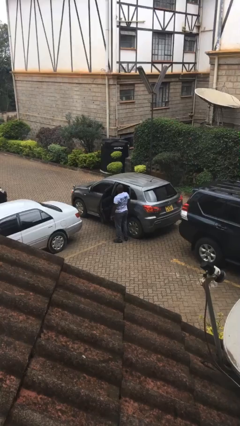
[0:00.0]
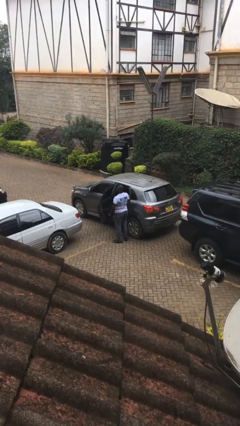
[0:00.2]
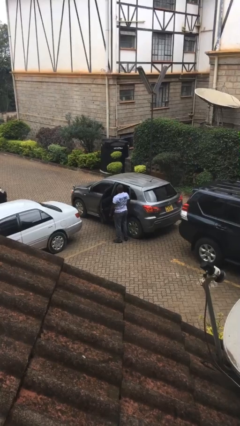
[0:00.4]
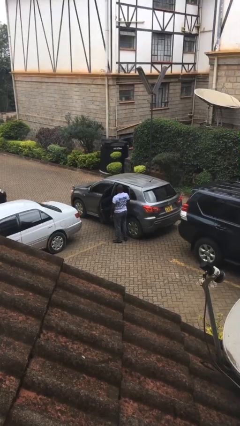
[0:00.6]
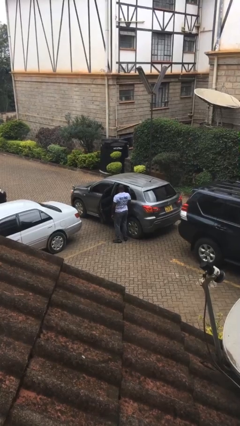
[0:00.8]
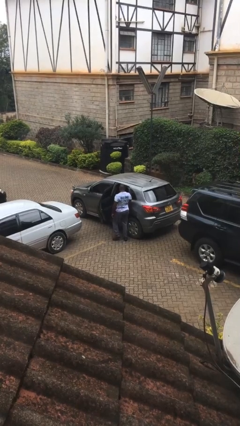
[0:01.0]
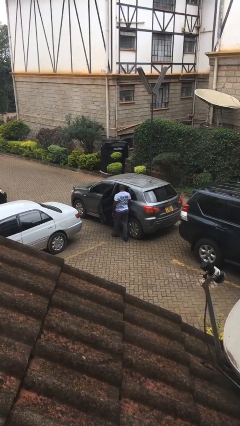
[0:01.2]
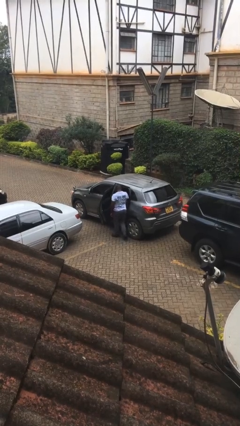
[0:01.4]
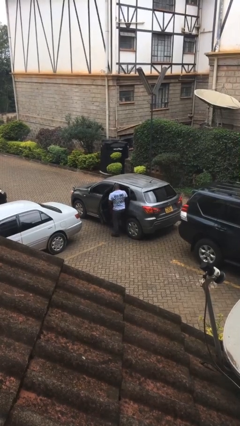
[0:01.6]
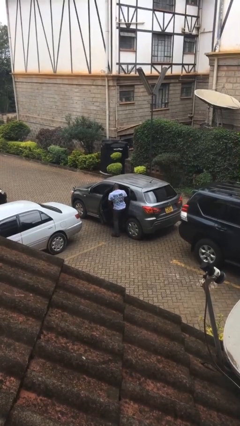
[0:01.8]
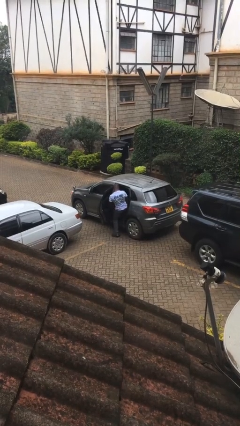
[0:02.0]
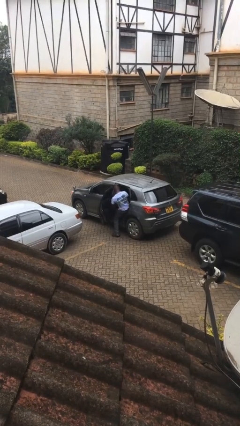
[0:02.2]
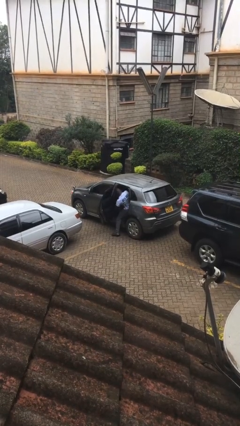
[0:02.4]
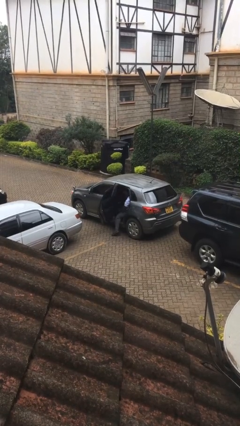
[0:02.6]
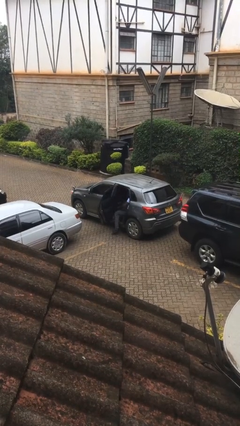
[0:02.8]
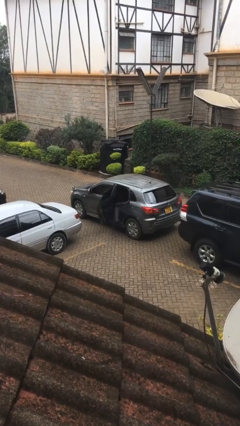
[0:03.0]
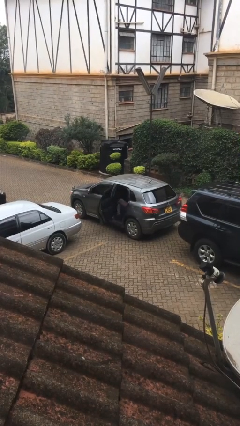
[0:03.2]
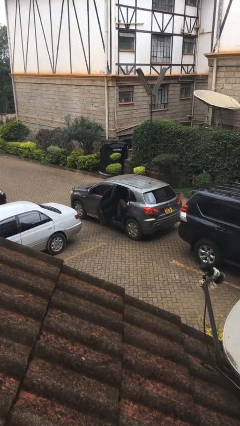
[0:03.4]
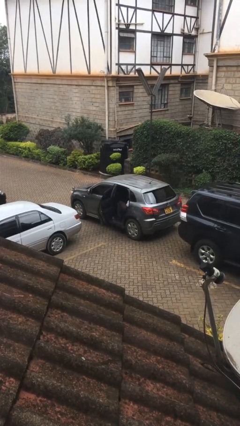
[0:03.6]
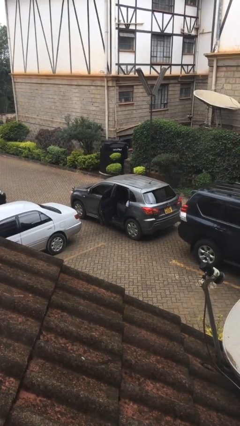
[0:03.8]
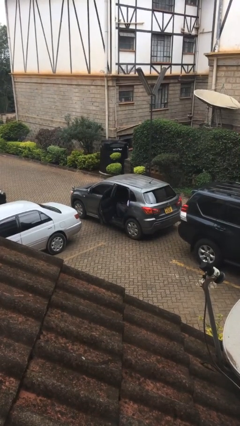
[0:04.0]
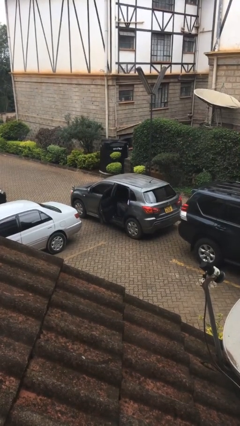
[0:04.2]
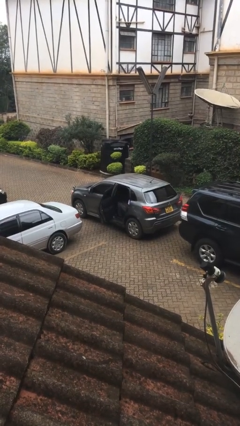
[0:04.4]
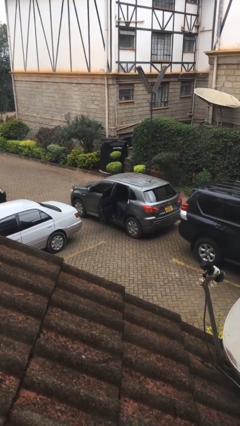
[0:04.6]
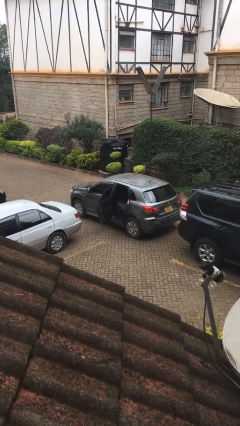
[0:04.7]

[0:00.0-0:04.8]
person enters car

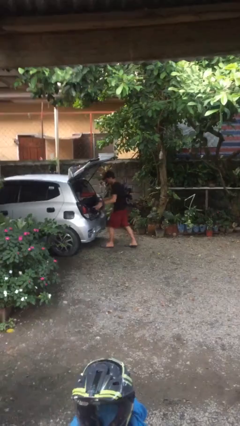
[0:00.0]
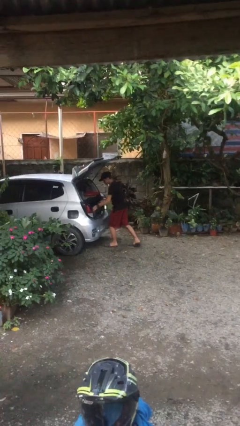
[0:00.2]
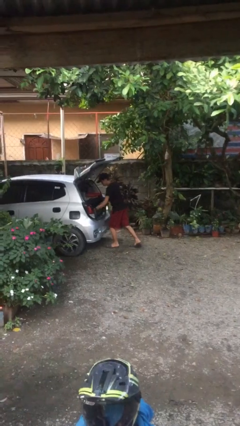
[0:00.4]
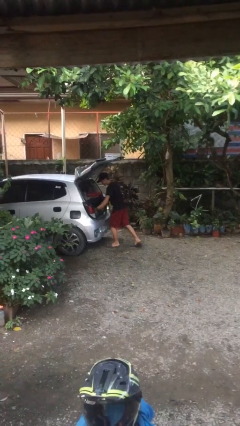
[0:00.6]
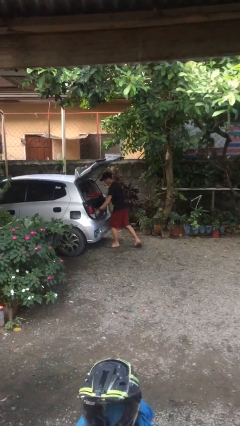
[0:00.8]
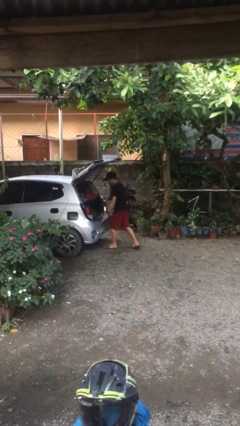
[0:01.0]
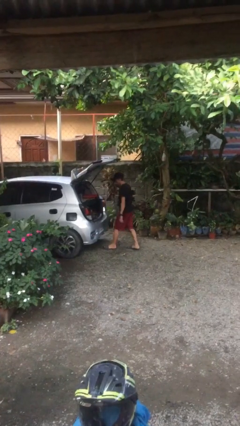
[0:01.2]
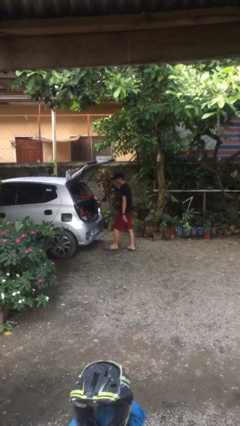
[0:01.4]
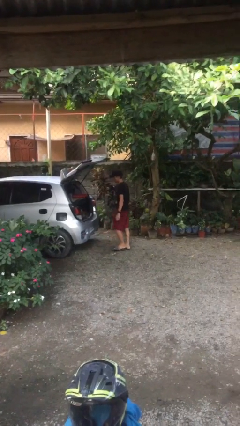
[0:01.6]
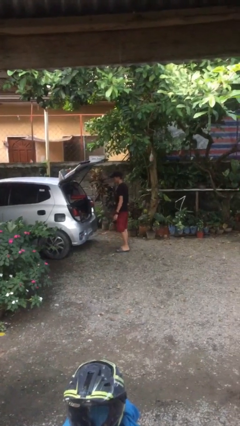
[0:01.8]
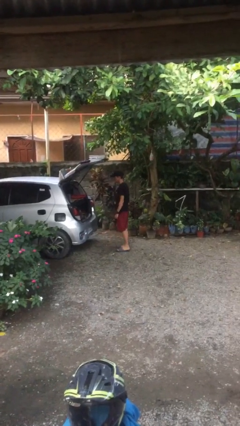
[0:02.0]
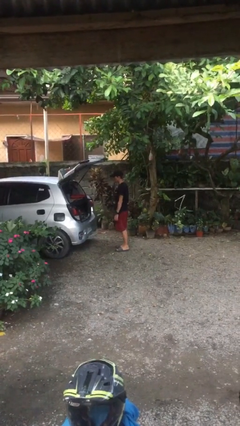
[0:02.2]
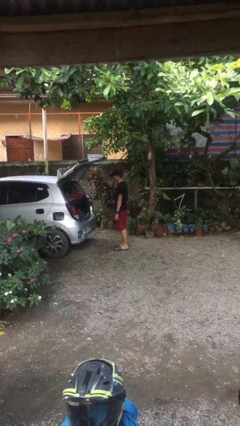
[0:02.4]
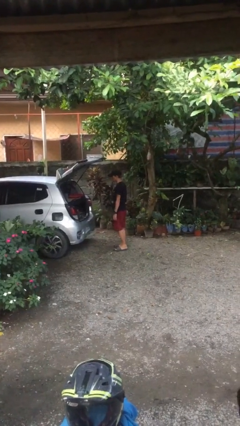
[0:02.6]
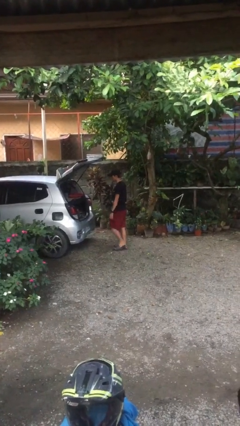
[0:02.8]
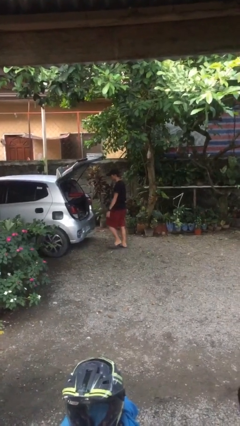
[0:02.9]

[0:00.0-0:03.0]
person loads car

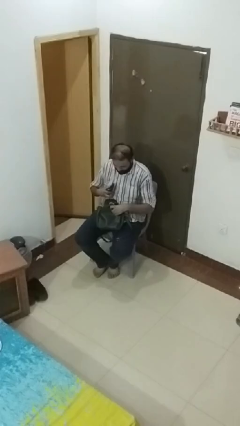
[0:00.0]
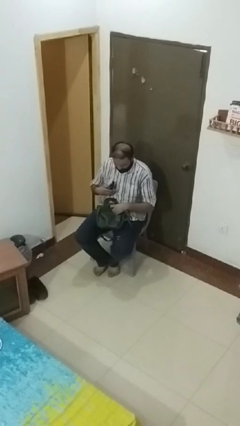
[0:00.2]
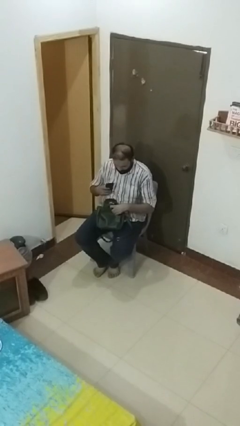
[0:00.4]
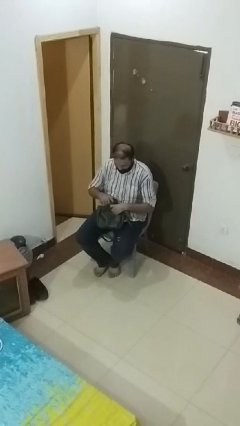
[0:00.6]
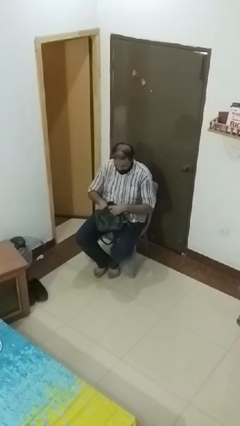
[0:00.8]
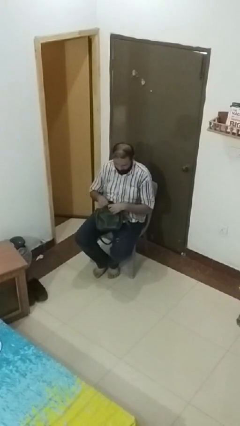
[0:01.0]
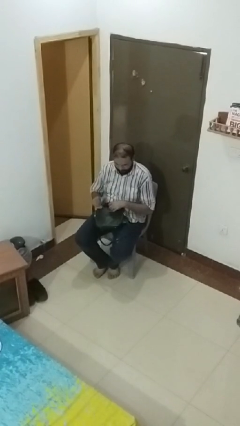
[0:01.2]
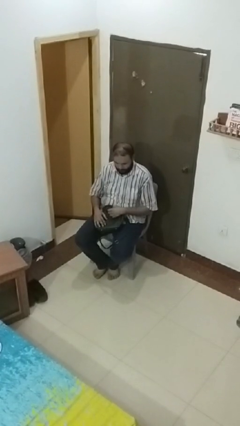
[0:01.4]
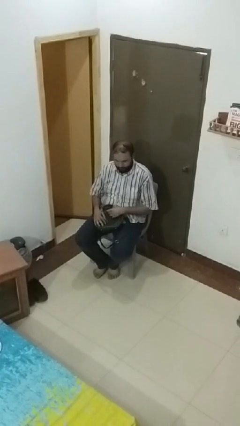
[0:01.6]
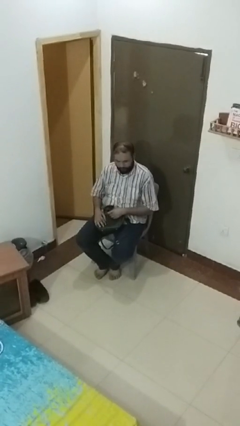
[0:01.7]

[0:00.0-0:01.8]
person puts object into purse

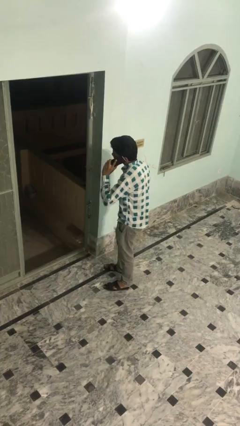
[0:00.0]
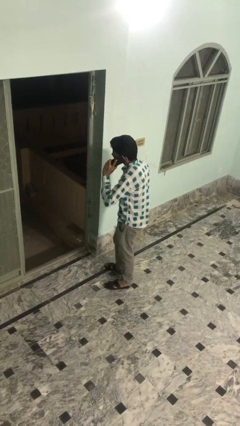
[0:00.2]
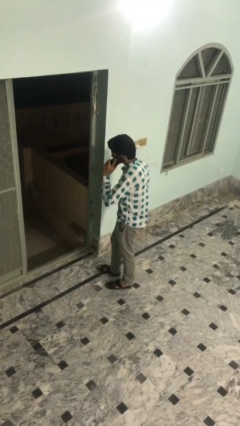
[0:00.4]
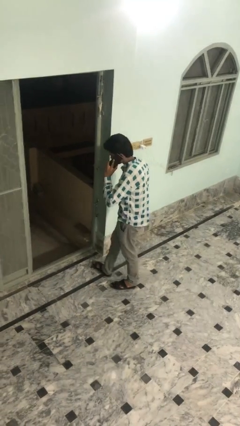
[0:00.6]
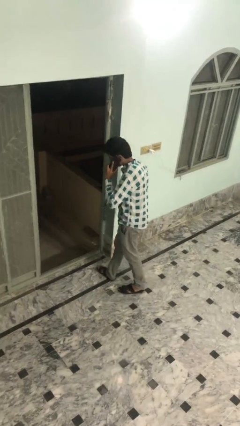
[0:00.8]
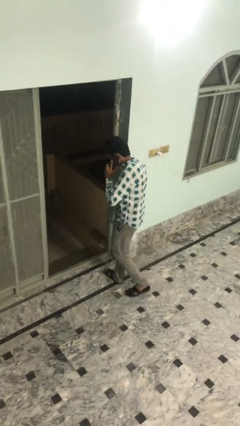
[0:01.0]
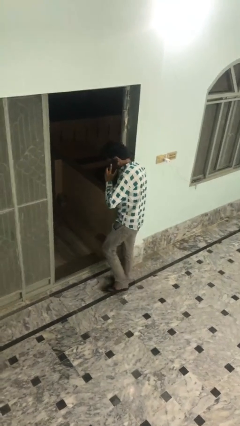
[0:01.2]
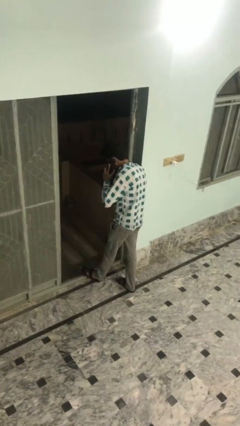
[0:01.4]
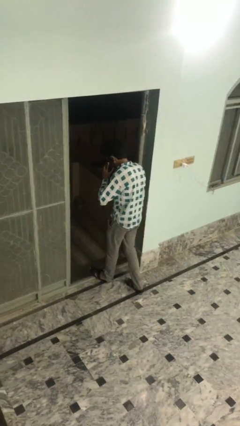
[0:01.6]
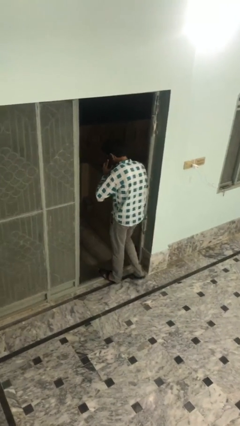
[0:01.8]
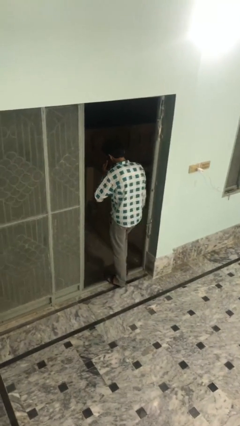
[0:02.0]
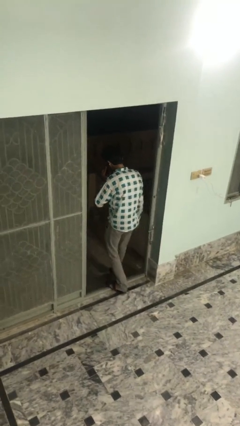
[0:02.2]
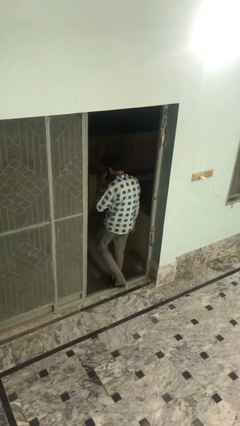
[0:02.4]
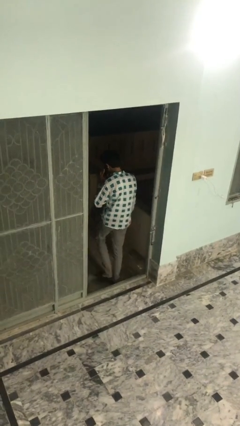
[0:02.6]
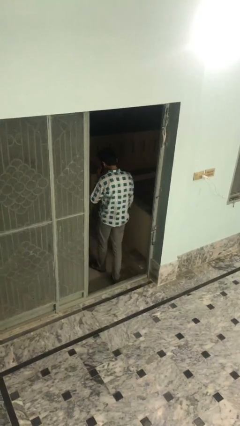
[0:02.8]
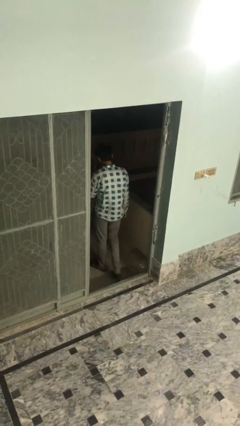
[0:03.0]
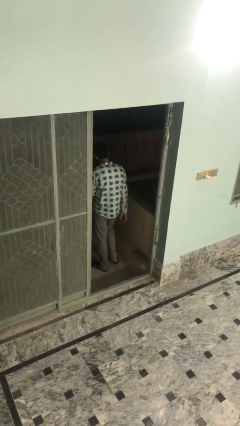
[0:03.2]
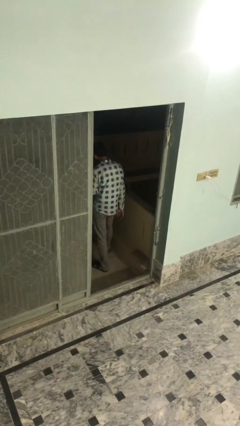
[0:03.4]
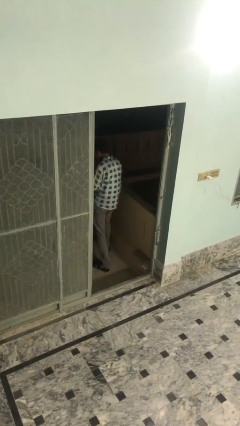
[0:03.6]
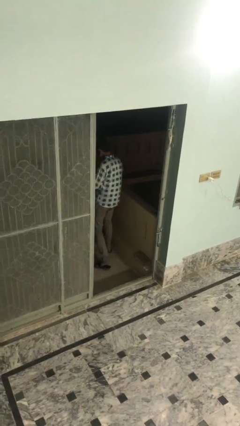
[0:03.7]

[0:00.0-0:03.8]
person exits scene through structure

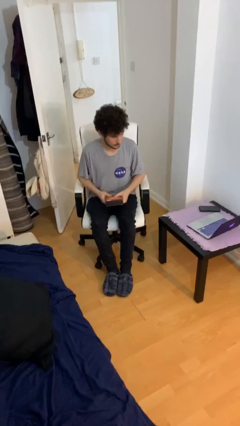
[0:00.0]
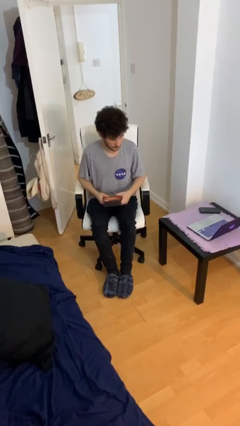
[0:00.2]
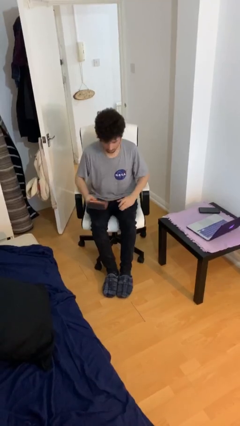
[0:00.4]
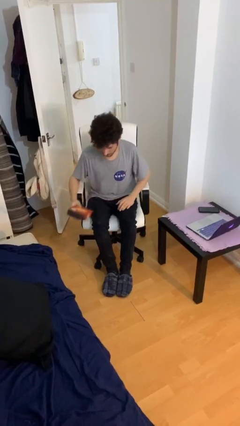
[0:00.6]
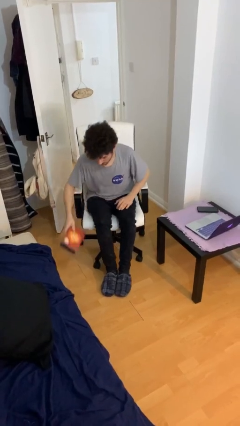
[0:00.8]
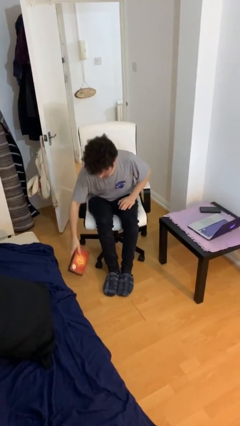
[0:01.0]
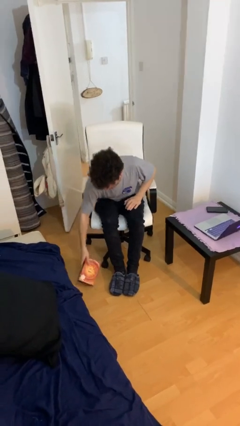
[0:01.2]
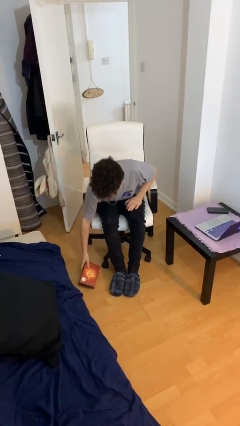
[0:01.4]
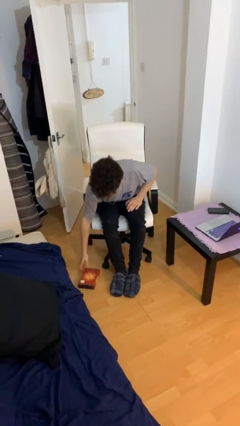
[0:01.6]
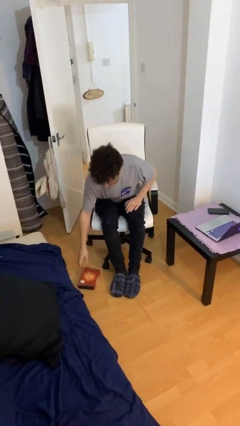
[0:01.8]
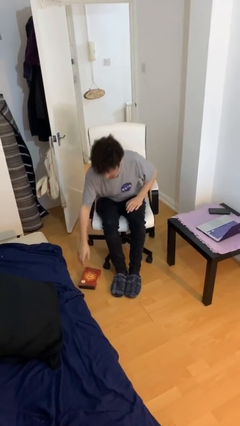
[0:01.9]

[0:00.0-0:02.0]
person puts down object on floor

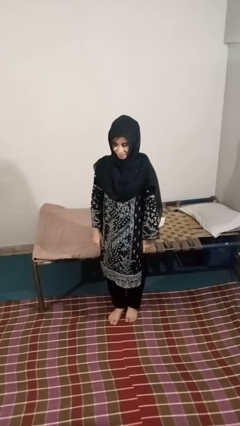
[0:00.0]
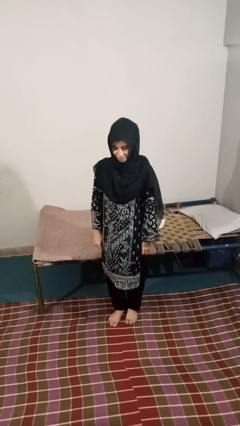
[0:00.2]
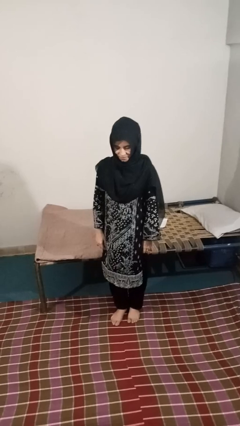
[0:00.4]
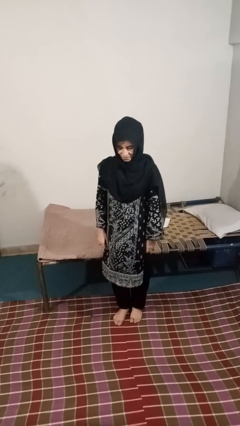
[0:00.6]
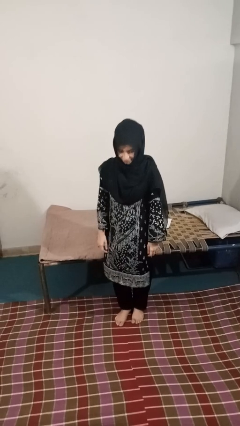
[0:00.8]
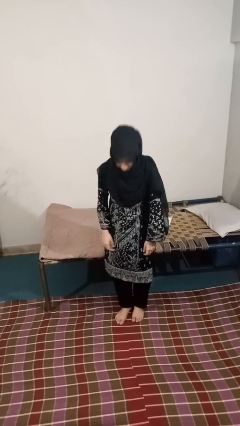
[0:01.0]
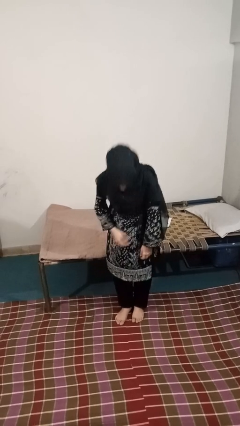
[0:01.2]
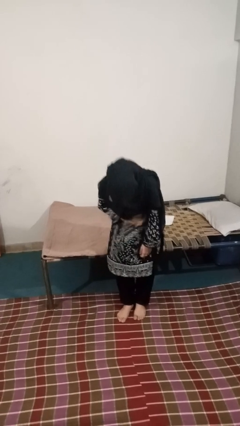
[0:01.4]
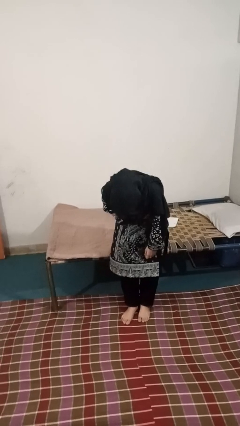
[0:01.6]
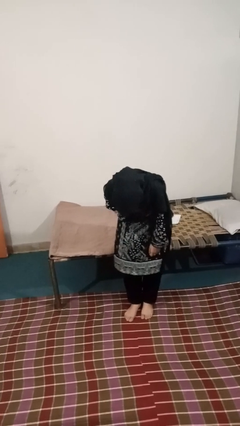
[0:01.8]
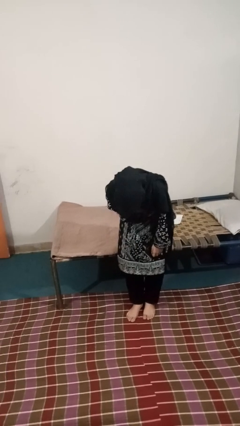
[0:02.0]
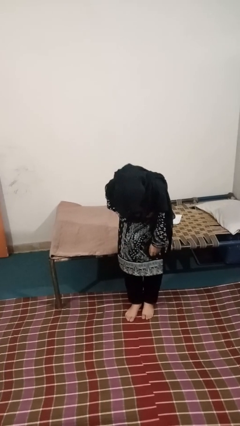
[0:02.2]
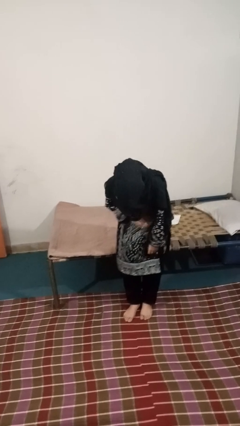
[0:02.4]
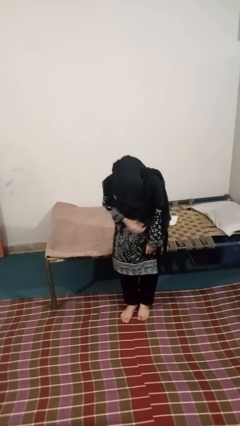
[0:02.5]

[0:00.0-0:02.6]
person bows
